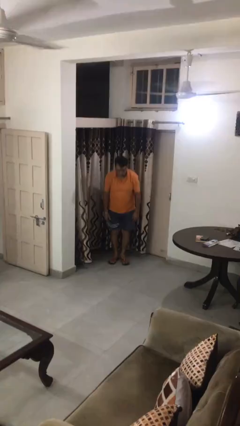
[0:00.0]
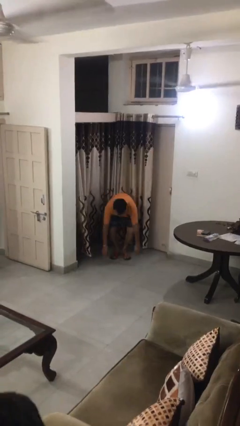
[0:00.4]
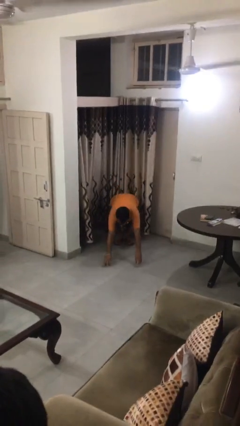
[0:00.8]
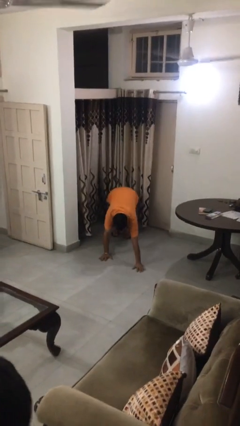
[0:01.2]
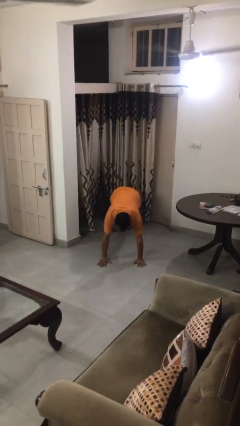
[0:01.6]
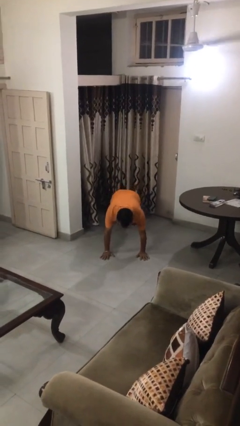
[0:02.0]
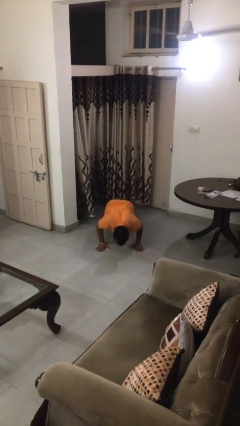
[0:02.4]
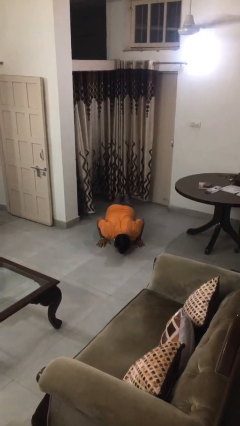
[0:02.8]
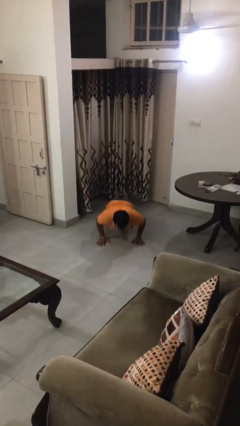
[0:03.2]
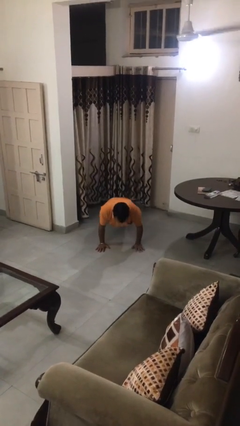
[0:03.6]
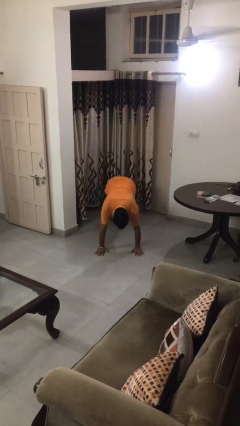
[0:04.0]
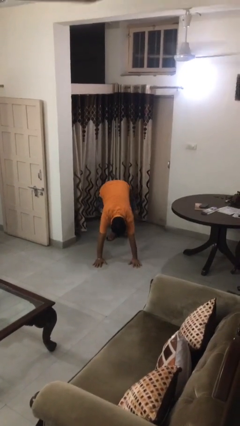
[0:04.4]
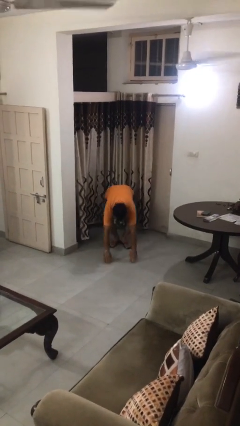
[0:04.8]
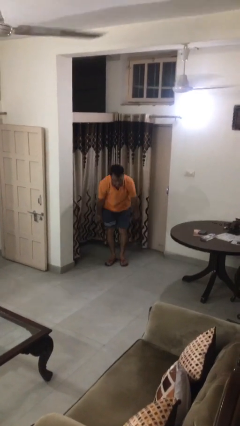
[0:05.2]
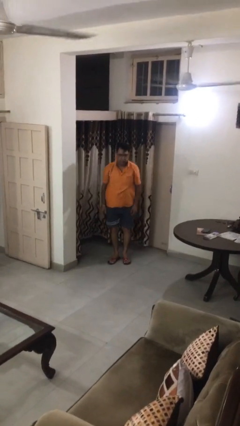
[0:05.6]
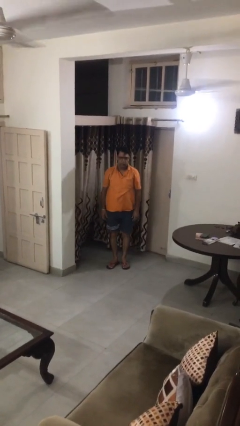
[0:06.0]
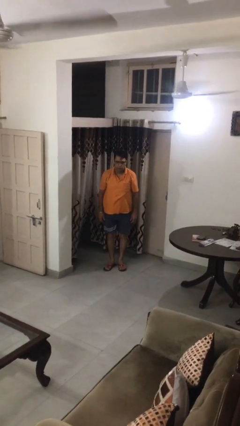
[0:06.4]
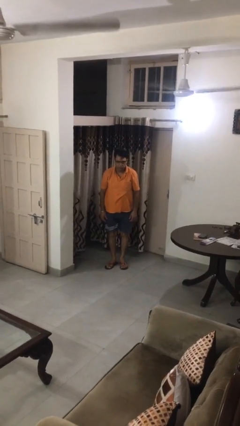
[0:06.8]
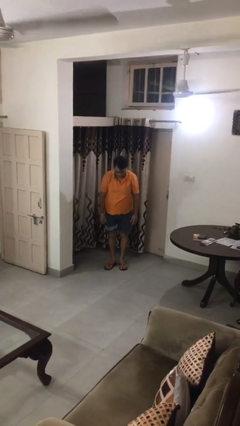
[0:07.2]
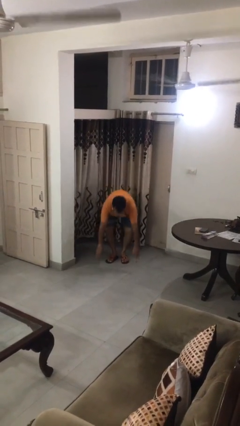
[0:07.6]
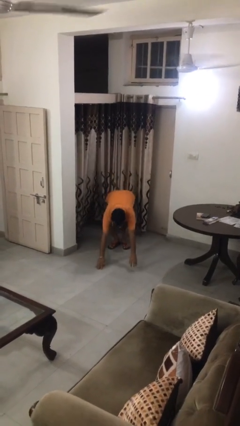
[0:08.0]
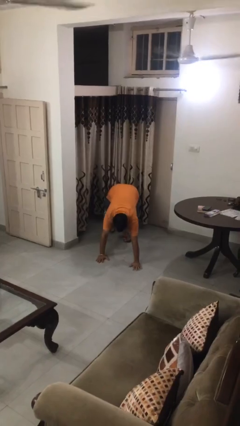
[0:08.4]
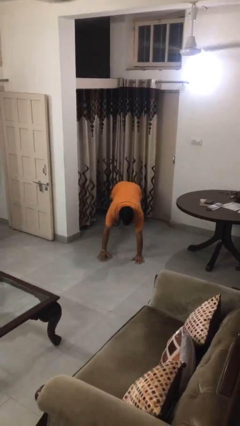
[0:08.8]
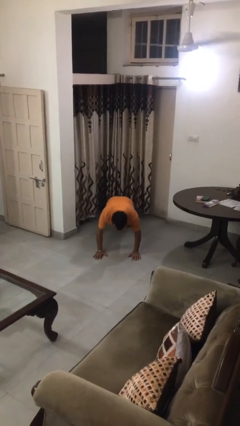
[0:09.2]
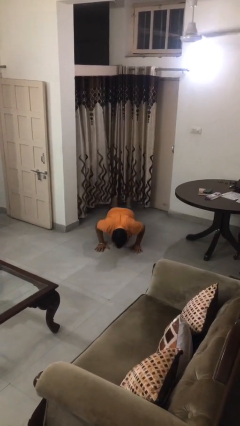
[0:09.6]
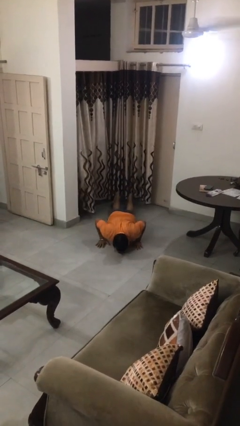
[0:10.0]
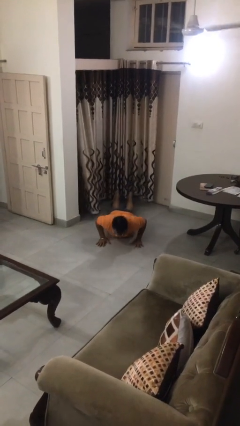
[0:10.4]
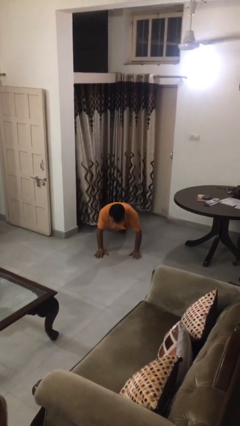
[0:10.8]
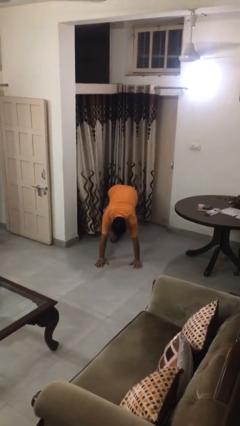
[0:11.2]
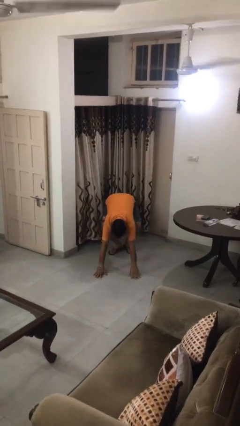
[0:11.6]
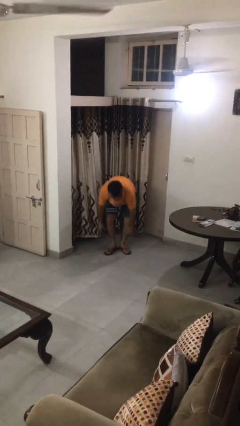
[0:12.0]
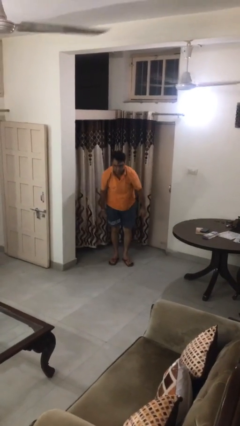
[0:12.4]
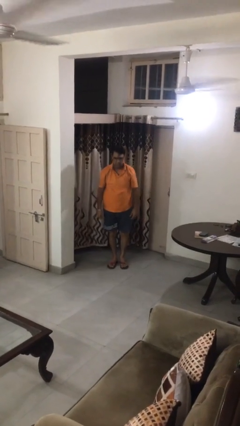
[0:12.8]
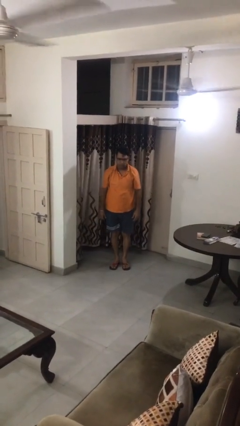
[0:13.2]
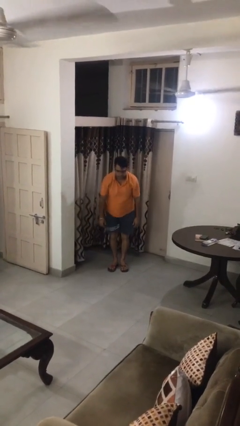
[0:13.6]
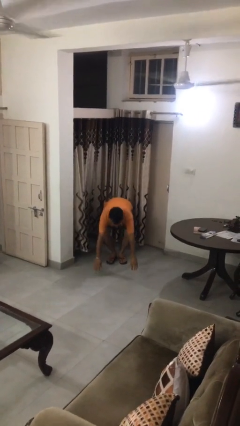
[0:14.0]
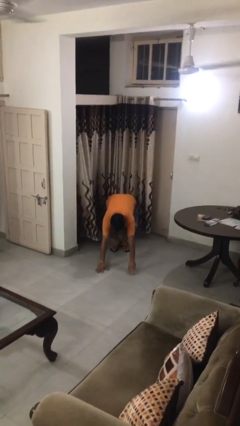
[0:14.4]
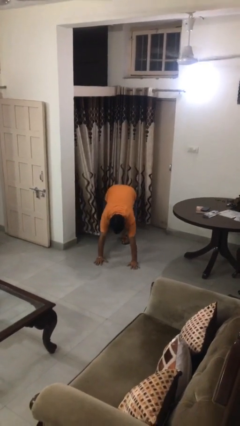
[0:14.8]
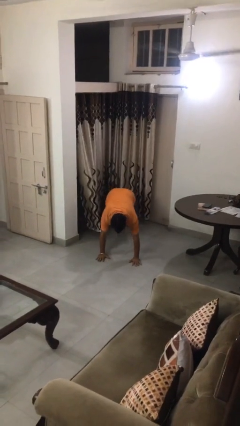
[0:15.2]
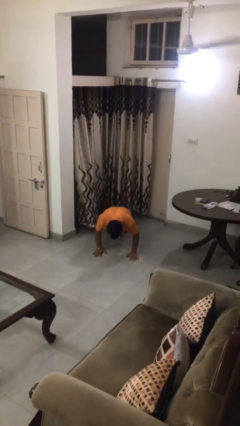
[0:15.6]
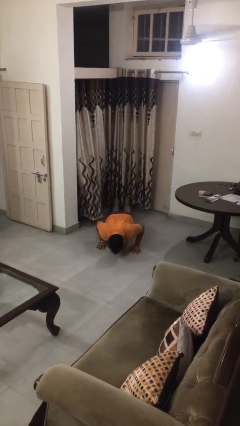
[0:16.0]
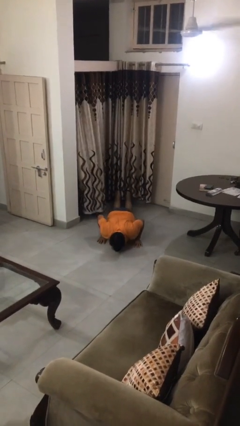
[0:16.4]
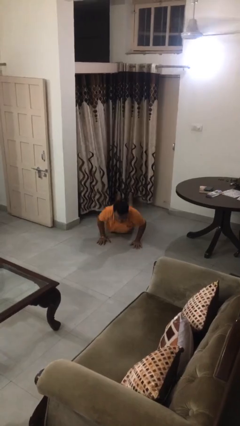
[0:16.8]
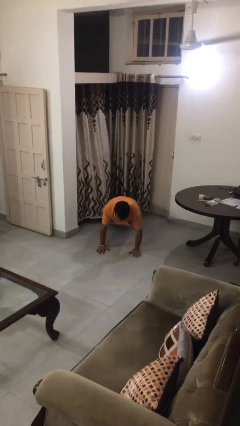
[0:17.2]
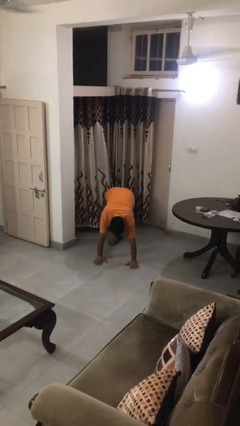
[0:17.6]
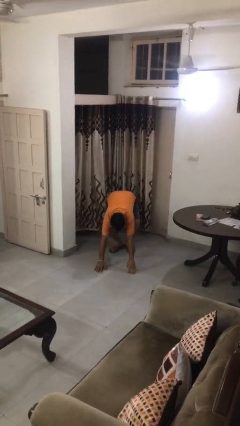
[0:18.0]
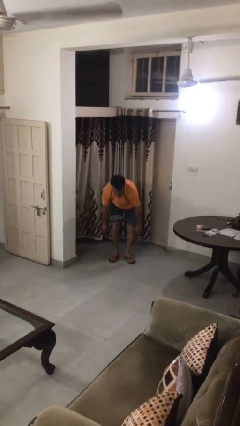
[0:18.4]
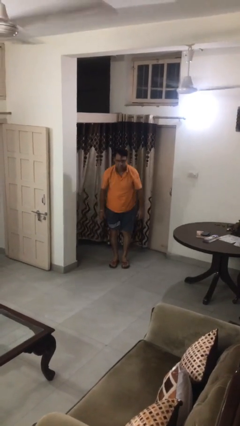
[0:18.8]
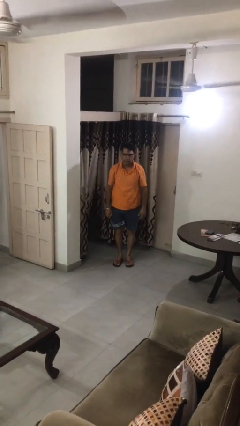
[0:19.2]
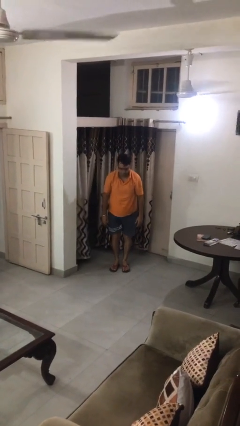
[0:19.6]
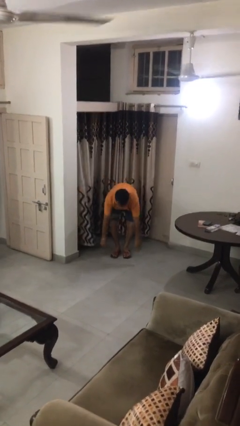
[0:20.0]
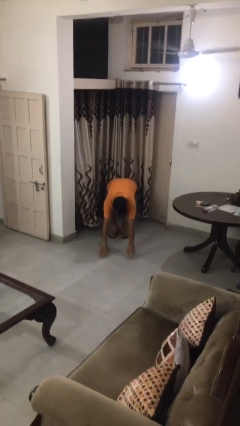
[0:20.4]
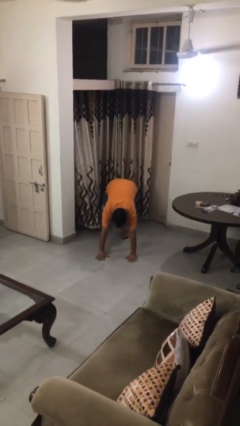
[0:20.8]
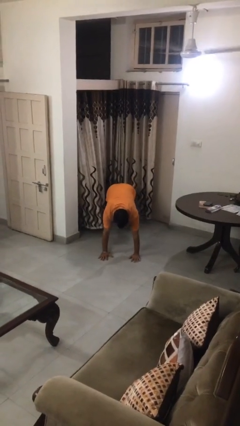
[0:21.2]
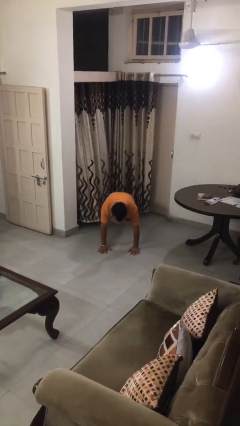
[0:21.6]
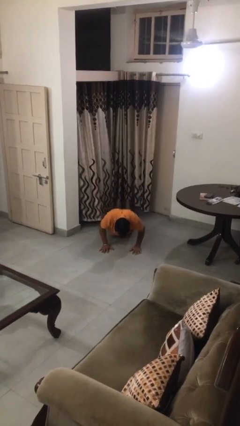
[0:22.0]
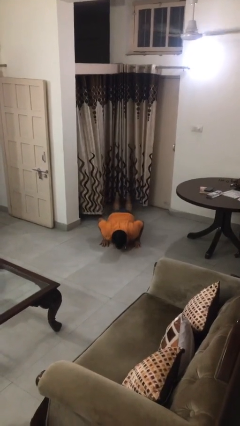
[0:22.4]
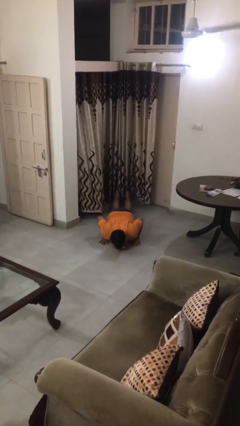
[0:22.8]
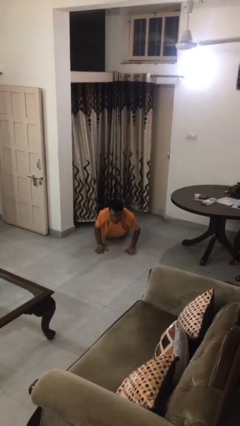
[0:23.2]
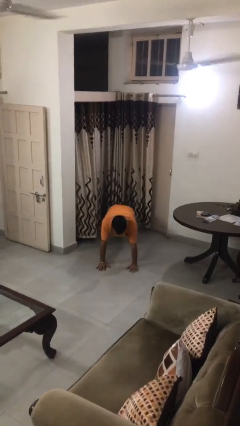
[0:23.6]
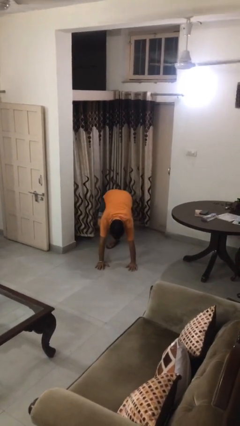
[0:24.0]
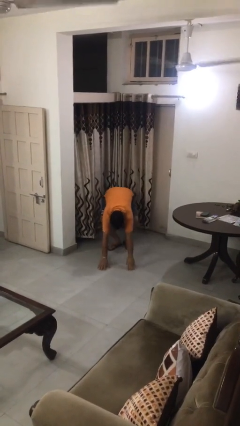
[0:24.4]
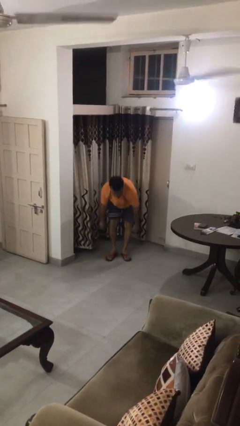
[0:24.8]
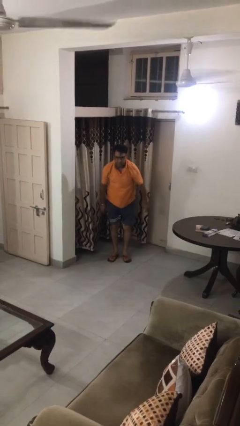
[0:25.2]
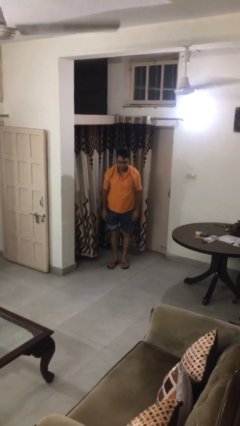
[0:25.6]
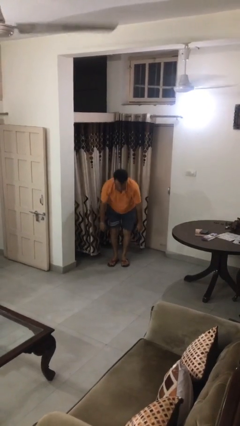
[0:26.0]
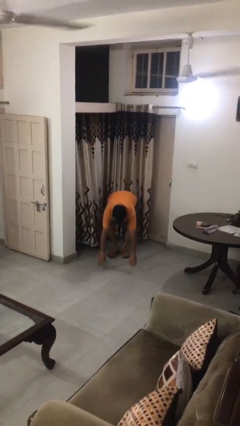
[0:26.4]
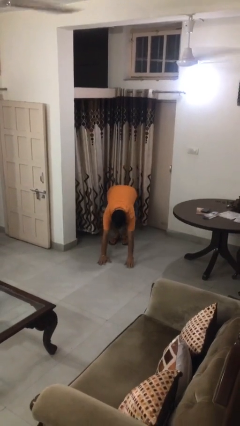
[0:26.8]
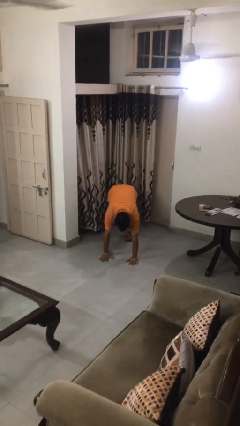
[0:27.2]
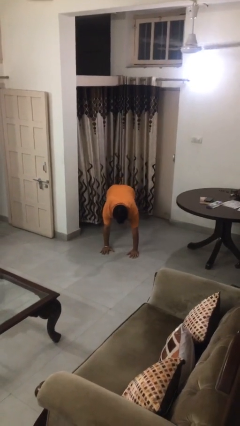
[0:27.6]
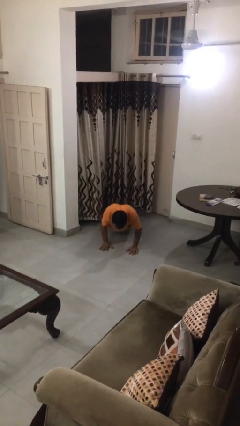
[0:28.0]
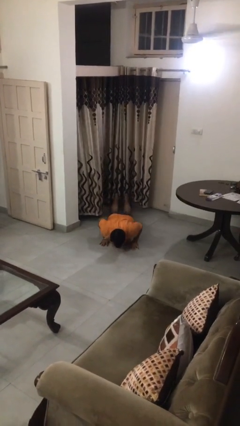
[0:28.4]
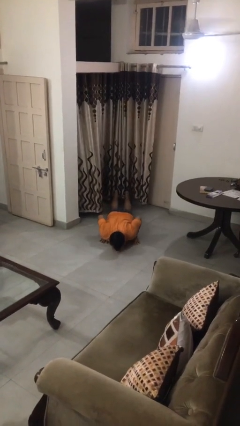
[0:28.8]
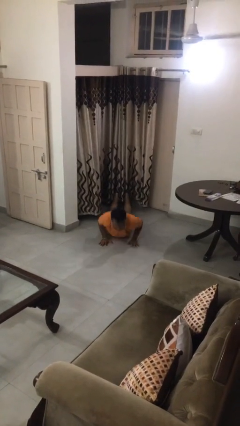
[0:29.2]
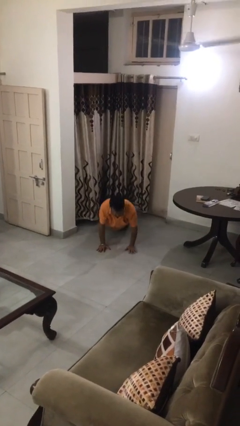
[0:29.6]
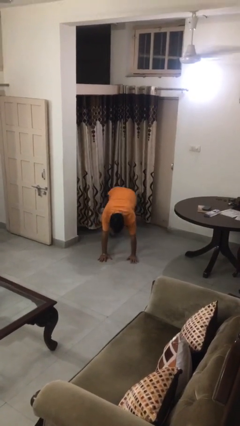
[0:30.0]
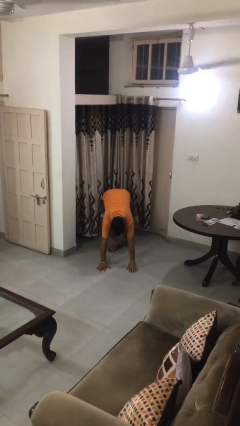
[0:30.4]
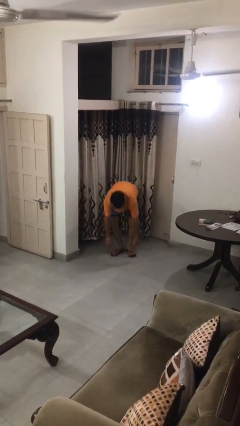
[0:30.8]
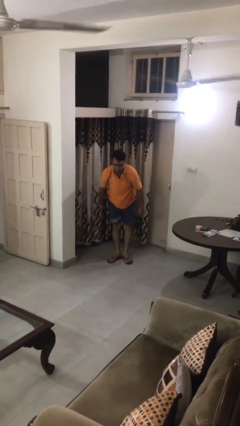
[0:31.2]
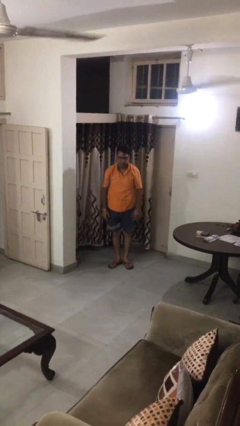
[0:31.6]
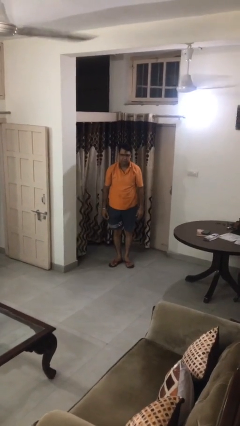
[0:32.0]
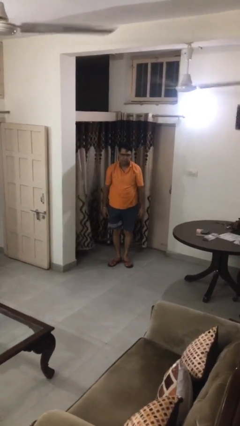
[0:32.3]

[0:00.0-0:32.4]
person exercises with pushup

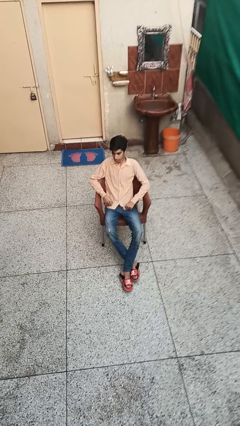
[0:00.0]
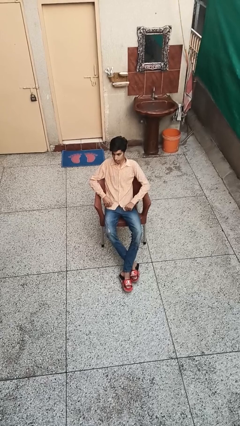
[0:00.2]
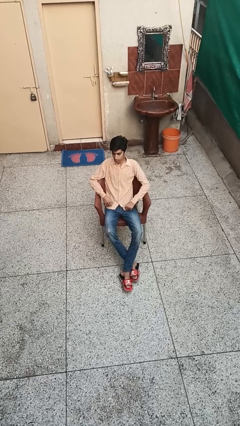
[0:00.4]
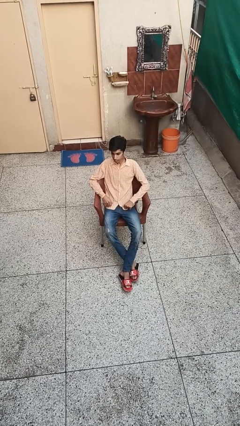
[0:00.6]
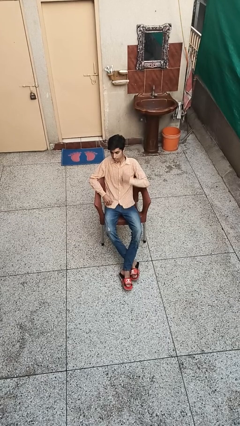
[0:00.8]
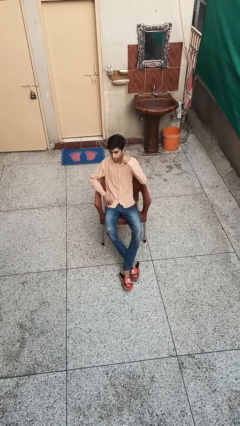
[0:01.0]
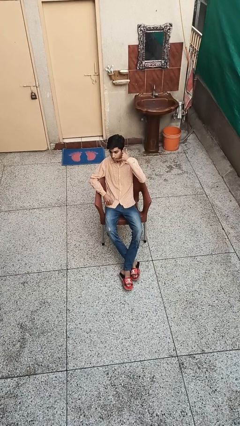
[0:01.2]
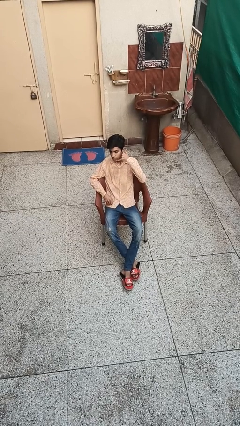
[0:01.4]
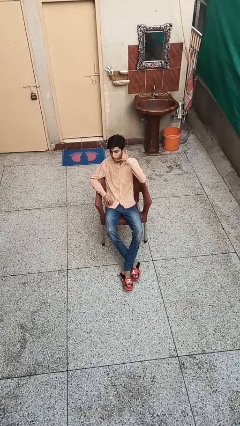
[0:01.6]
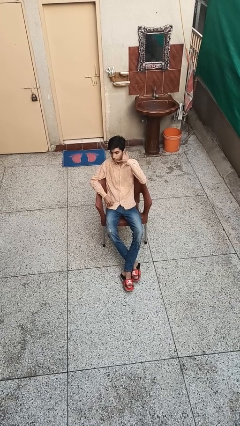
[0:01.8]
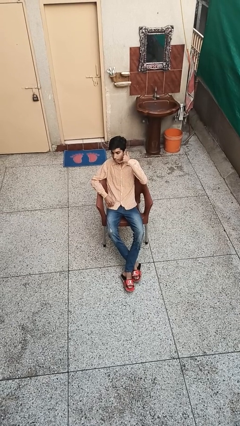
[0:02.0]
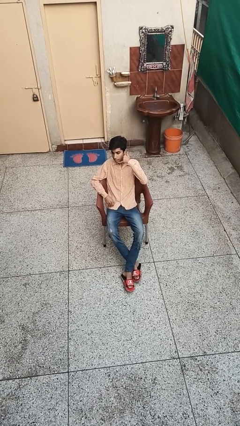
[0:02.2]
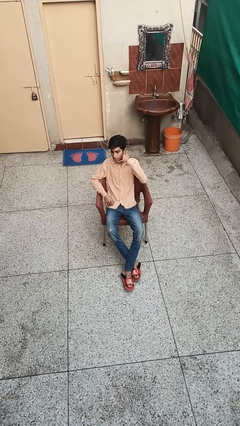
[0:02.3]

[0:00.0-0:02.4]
person gestures call me
